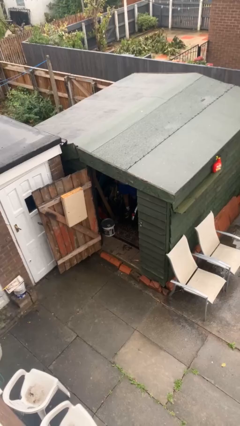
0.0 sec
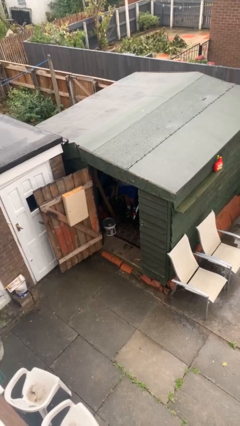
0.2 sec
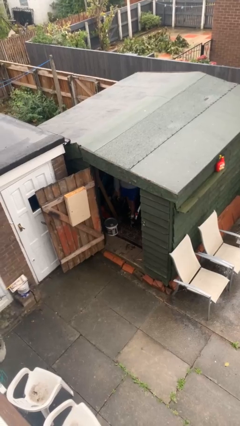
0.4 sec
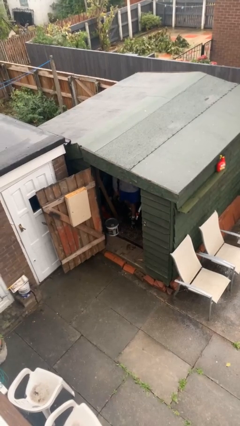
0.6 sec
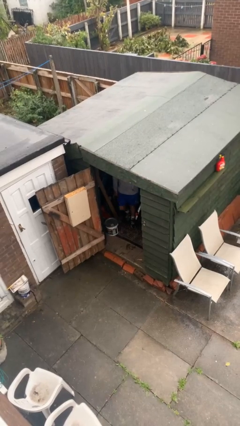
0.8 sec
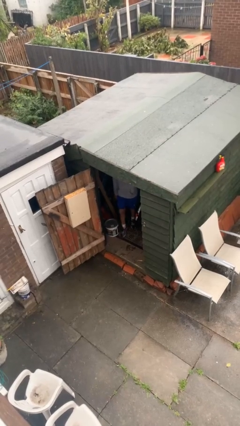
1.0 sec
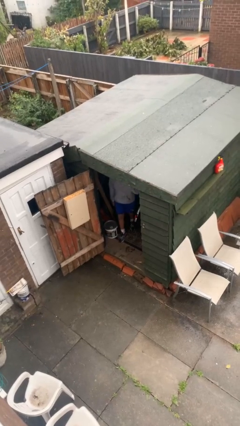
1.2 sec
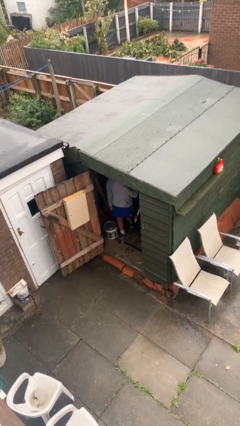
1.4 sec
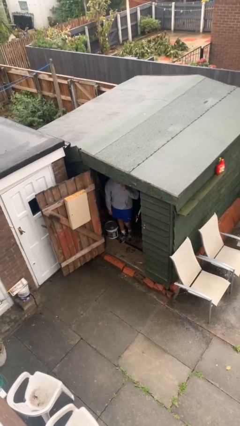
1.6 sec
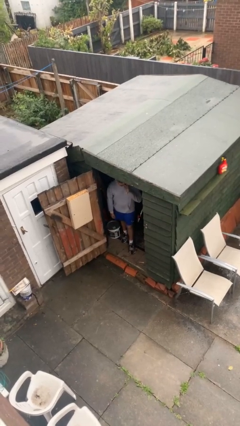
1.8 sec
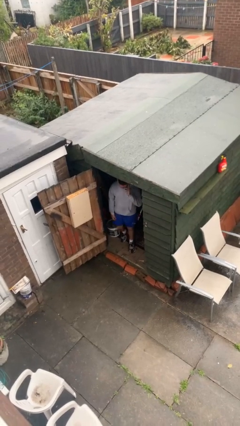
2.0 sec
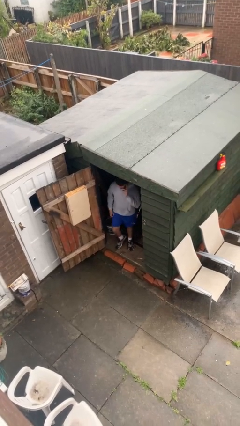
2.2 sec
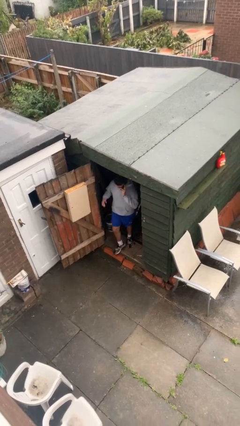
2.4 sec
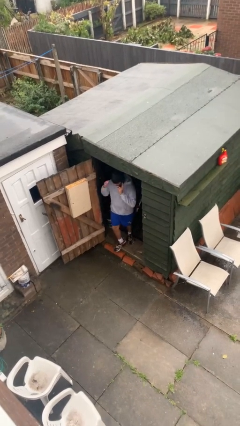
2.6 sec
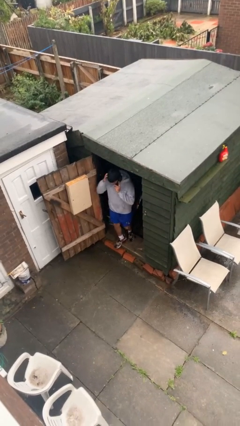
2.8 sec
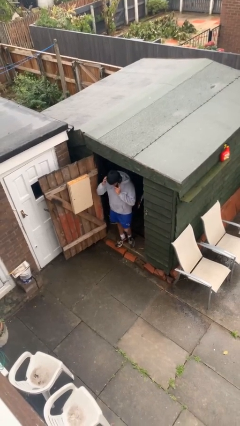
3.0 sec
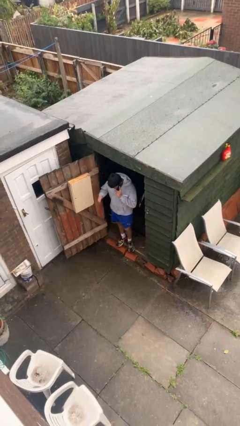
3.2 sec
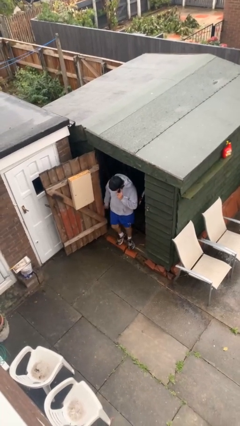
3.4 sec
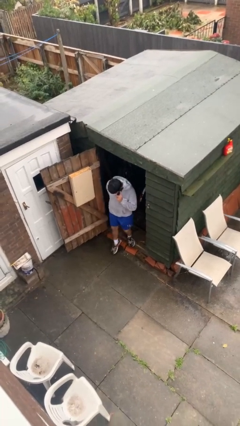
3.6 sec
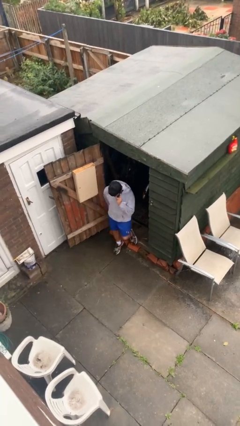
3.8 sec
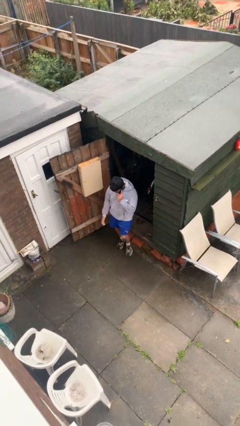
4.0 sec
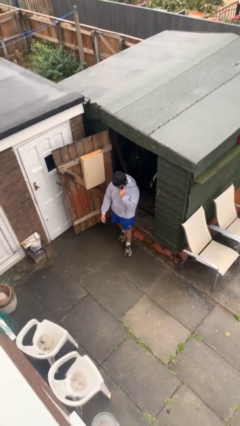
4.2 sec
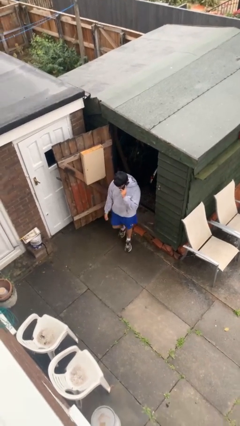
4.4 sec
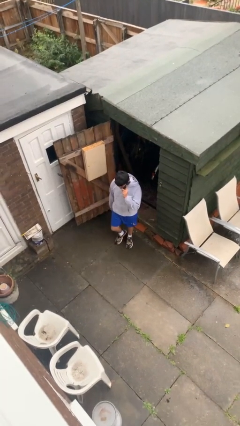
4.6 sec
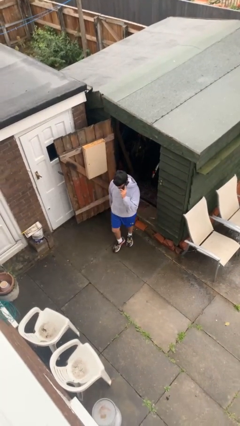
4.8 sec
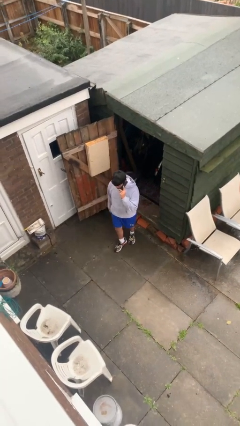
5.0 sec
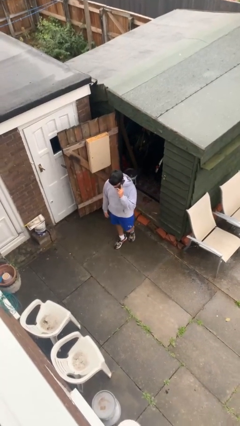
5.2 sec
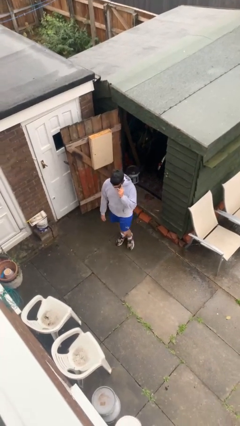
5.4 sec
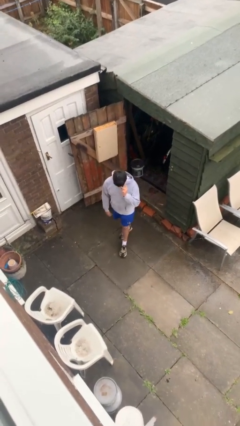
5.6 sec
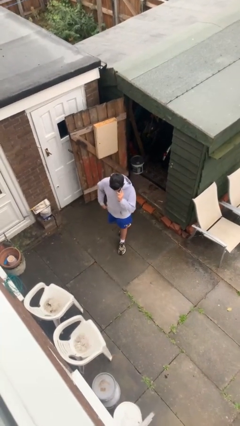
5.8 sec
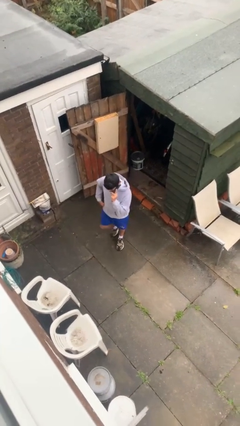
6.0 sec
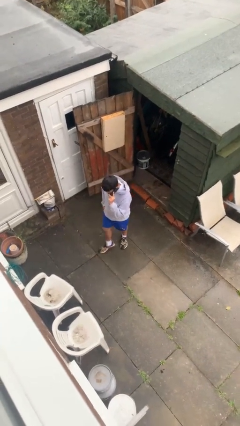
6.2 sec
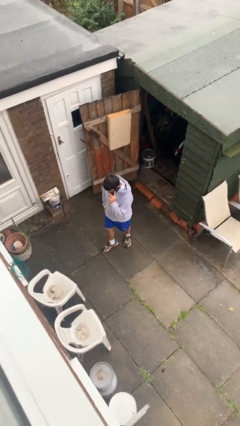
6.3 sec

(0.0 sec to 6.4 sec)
person enters scene through structure

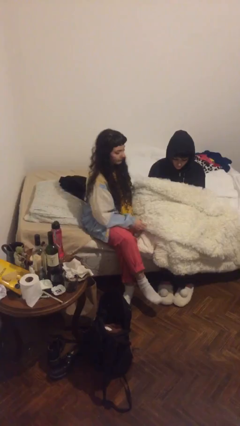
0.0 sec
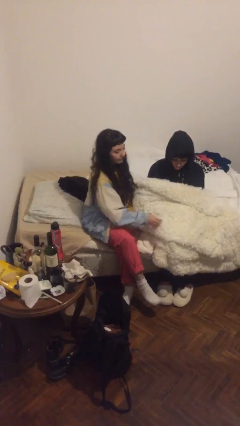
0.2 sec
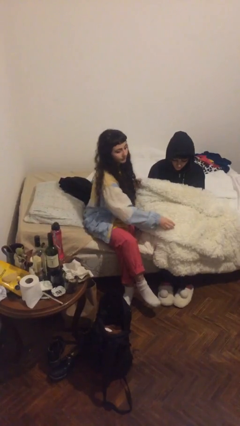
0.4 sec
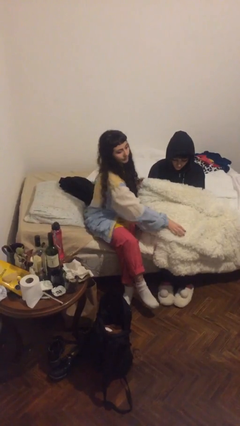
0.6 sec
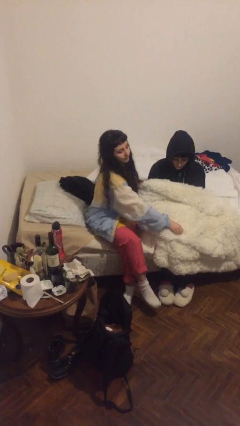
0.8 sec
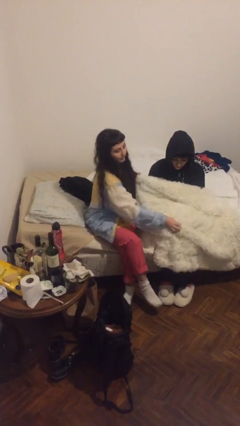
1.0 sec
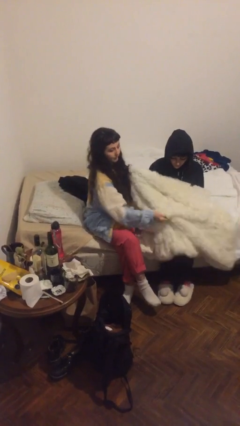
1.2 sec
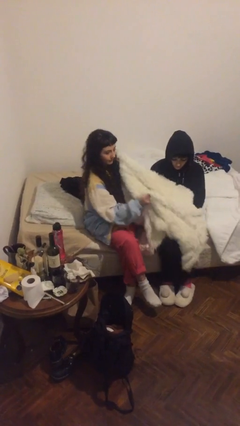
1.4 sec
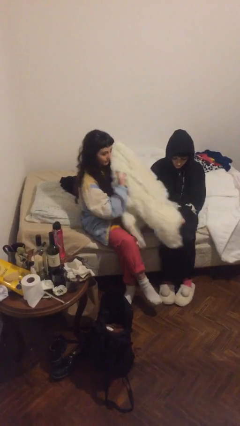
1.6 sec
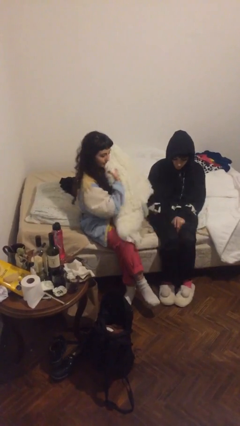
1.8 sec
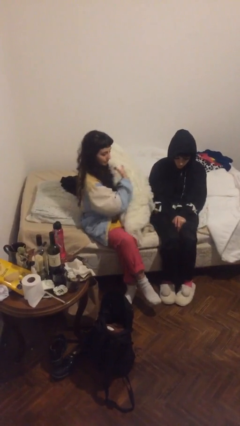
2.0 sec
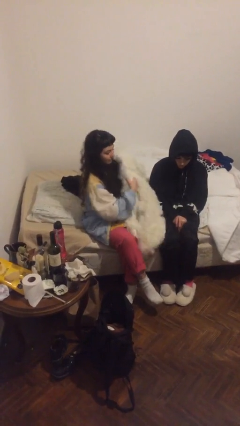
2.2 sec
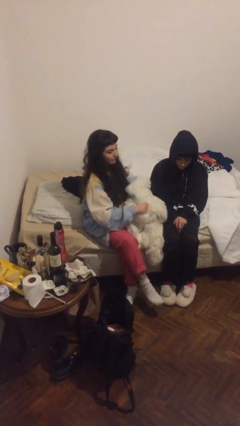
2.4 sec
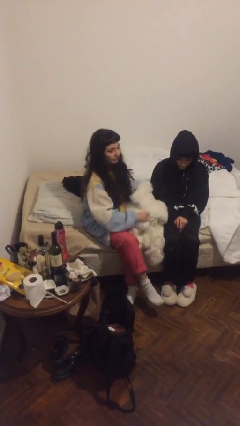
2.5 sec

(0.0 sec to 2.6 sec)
person uncovers friend with blanket

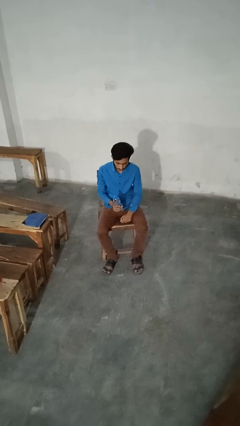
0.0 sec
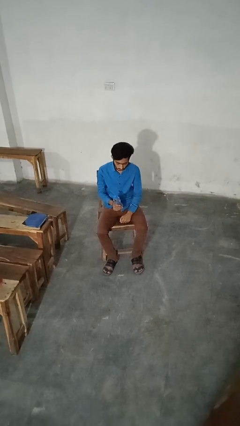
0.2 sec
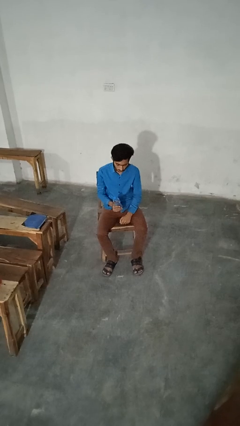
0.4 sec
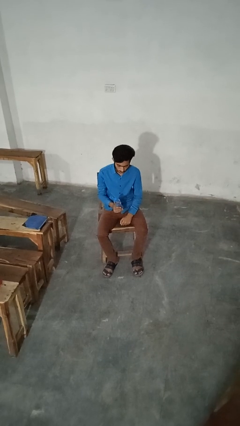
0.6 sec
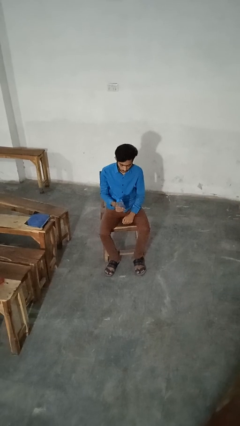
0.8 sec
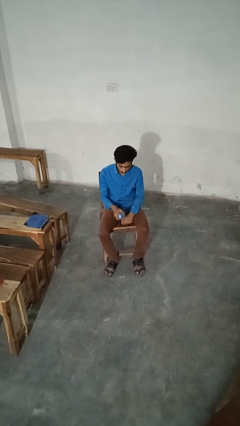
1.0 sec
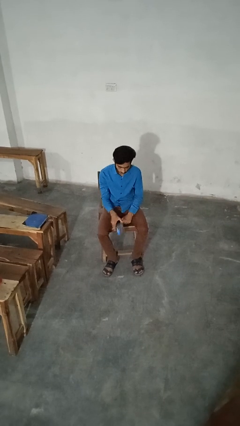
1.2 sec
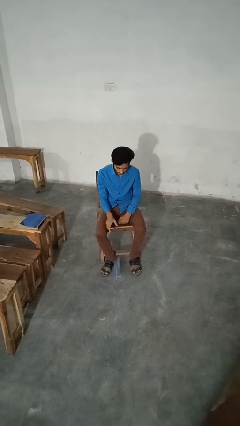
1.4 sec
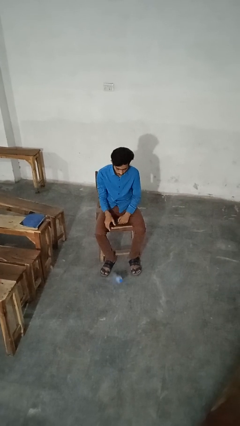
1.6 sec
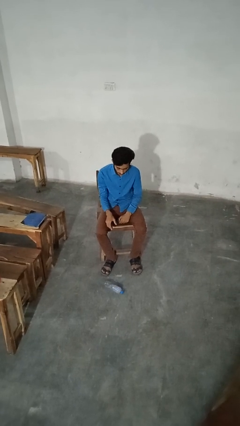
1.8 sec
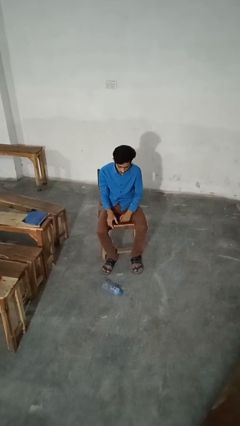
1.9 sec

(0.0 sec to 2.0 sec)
person drops object

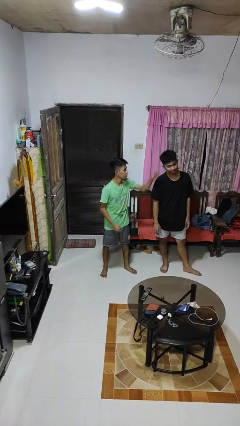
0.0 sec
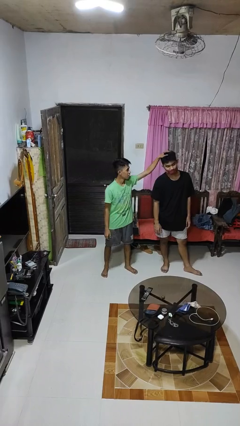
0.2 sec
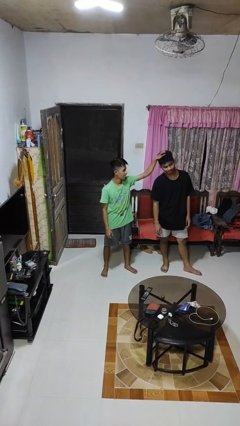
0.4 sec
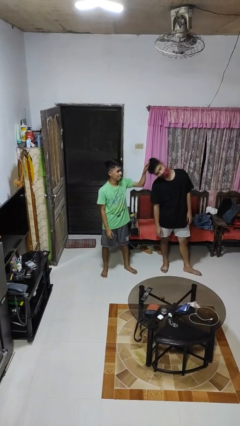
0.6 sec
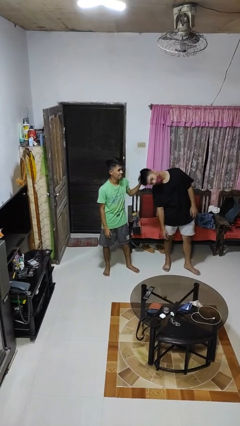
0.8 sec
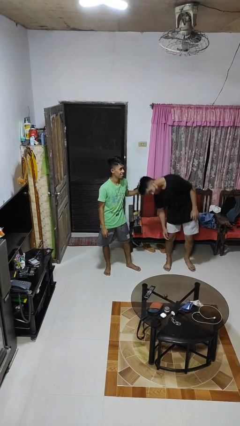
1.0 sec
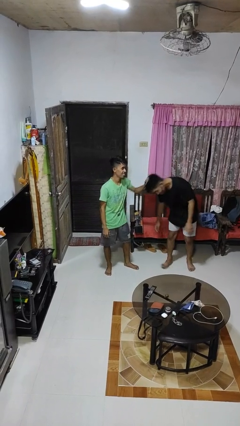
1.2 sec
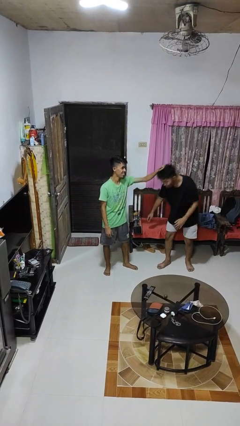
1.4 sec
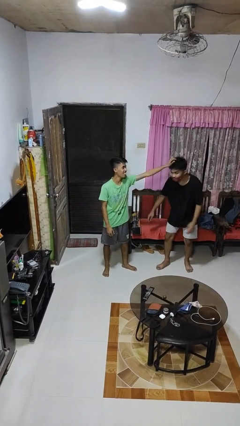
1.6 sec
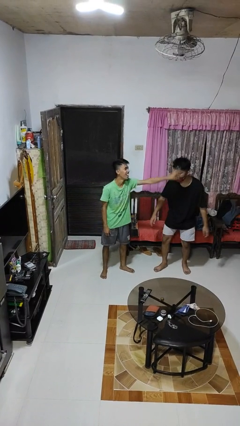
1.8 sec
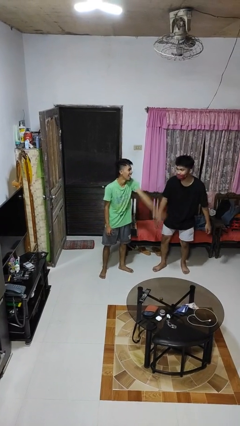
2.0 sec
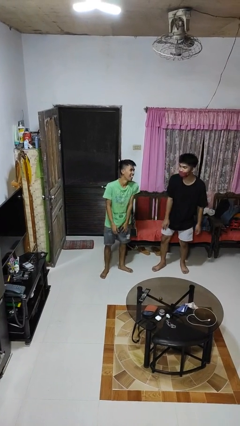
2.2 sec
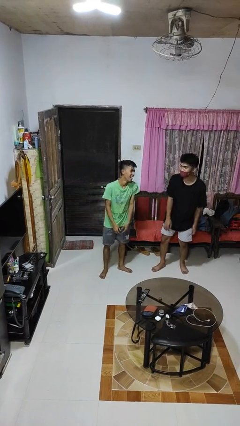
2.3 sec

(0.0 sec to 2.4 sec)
person grabs person by hair

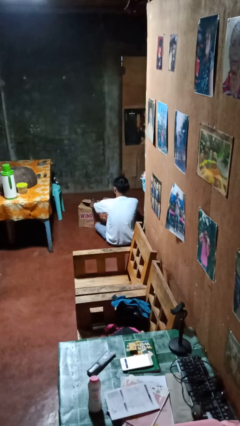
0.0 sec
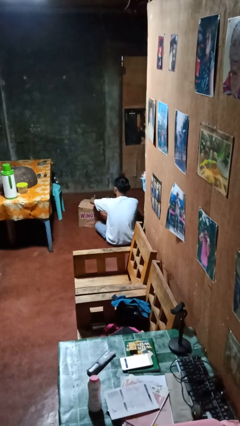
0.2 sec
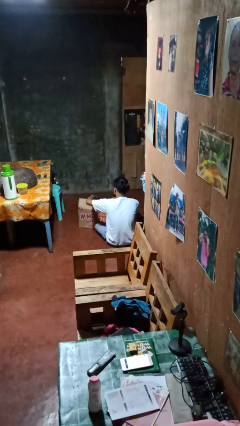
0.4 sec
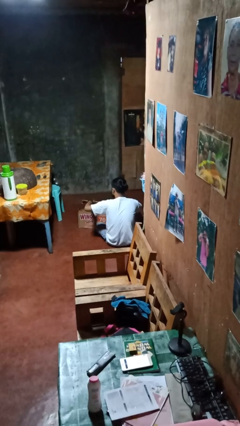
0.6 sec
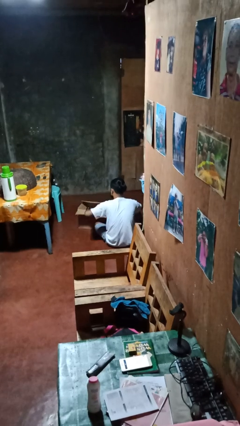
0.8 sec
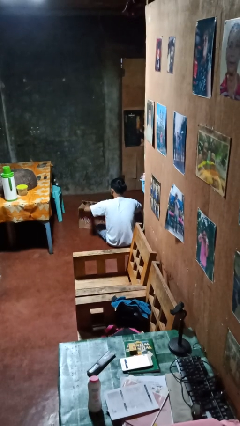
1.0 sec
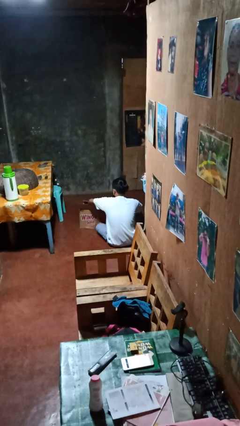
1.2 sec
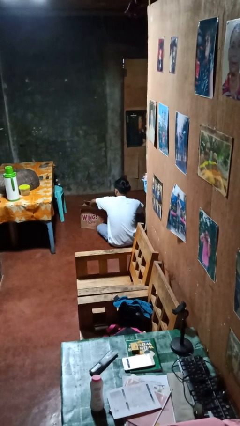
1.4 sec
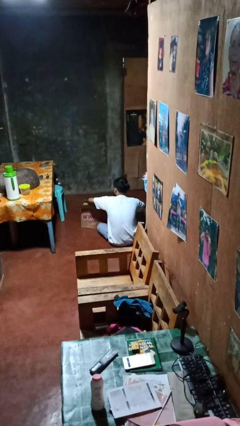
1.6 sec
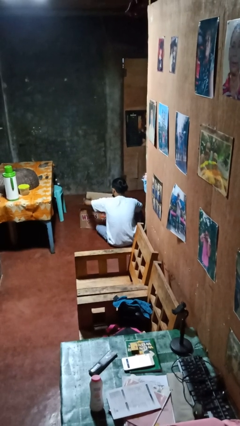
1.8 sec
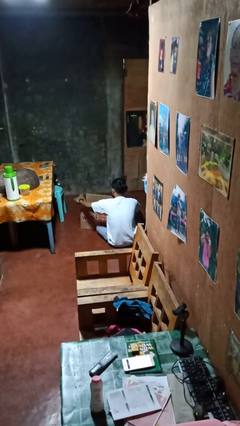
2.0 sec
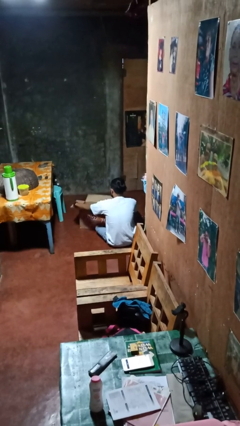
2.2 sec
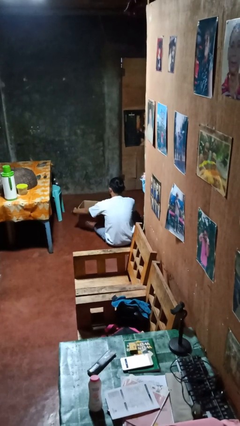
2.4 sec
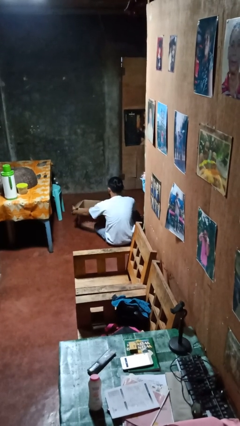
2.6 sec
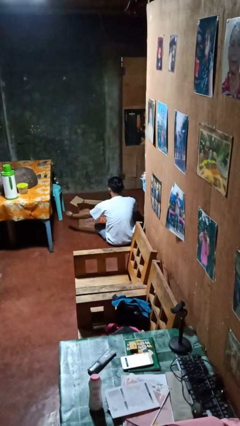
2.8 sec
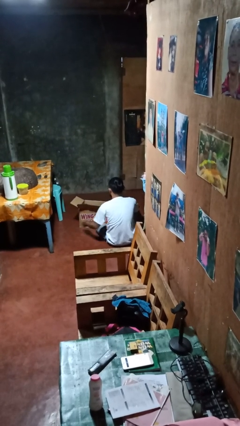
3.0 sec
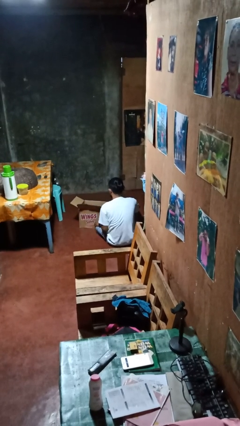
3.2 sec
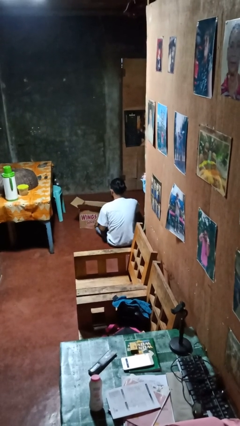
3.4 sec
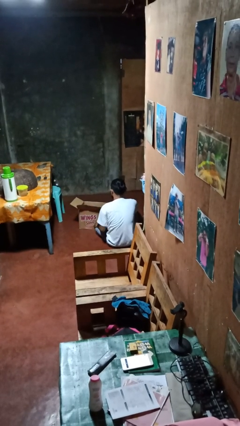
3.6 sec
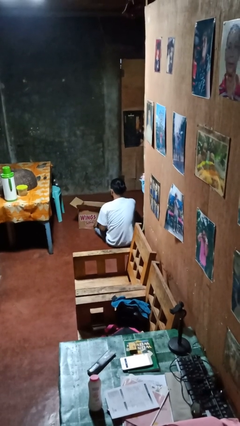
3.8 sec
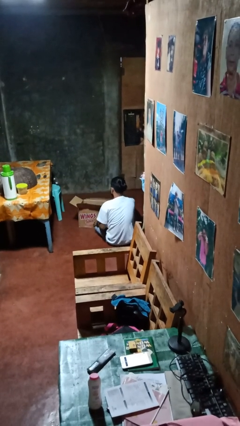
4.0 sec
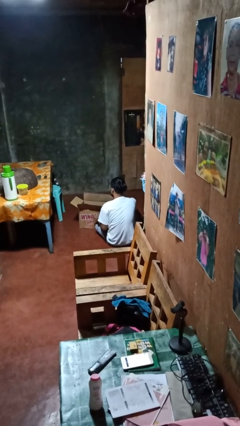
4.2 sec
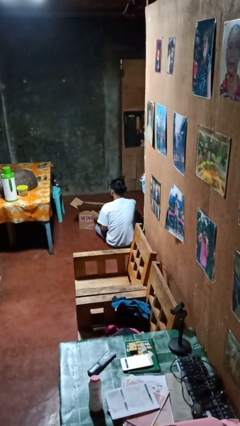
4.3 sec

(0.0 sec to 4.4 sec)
person opens box
